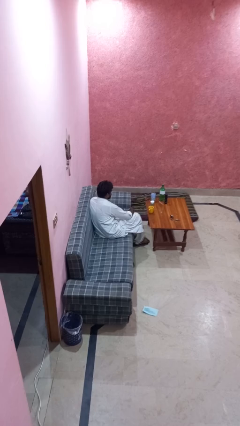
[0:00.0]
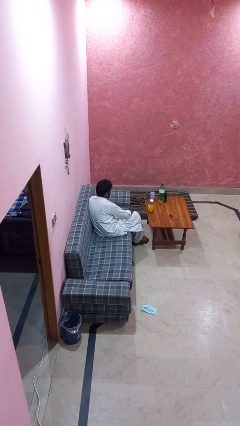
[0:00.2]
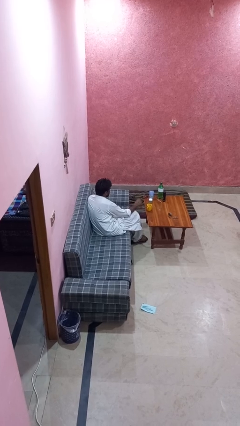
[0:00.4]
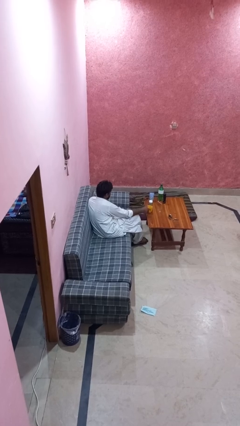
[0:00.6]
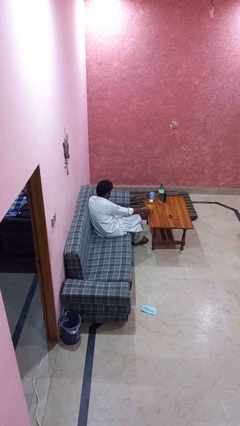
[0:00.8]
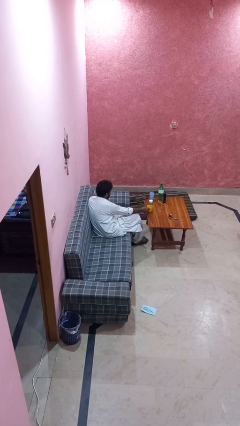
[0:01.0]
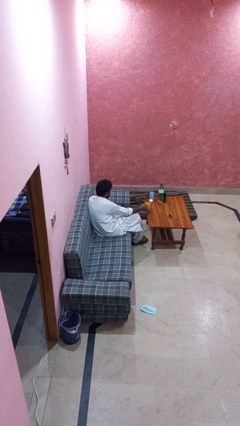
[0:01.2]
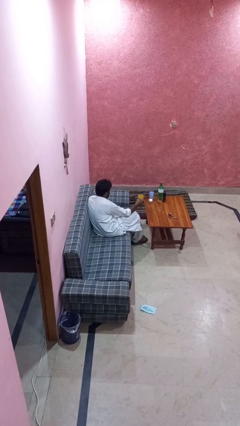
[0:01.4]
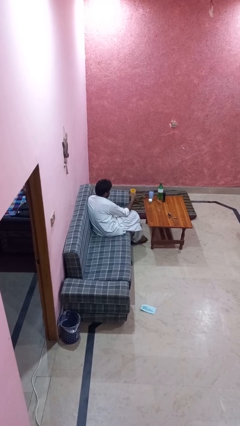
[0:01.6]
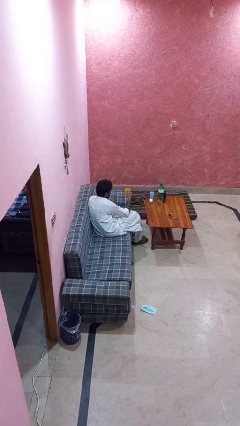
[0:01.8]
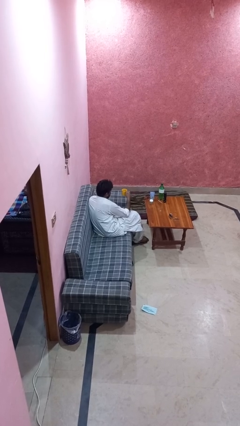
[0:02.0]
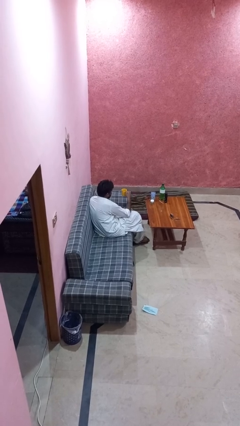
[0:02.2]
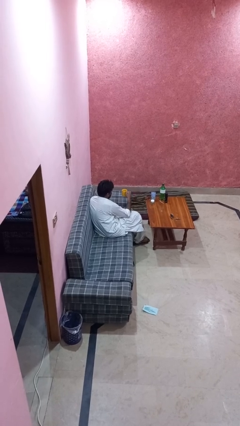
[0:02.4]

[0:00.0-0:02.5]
person picks up object from table

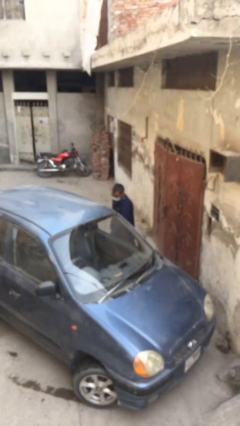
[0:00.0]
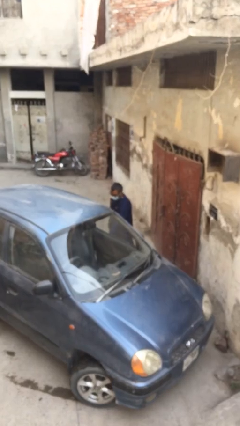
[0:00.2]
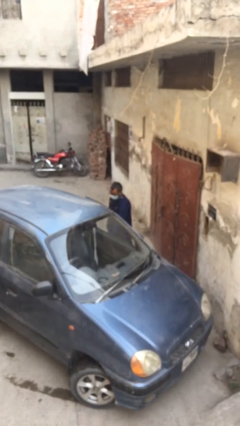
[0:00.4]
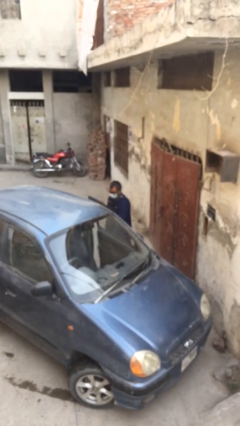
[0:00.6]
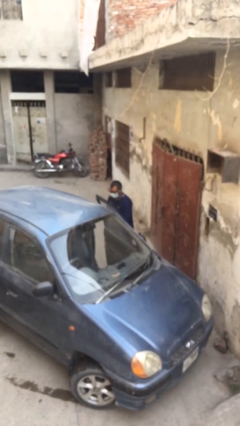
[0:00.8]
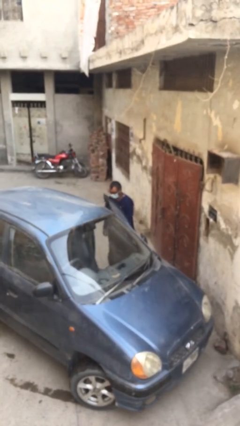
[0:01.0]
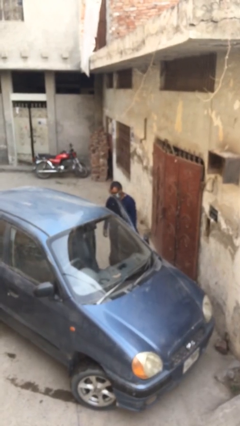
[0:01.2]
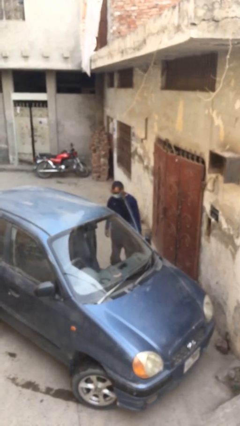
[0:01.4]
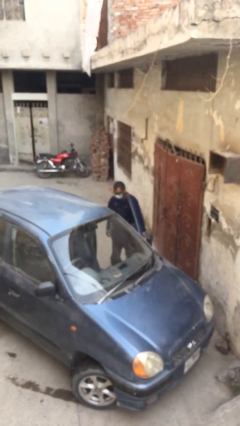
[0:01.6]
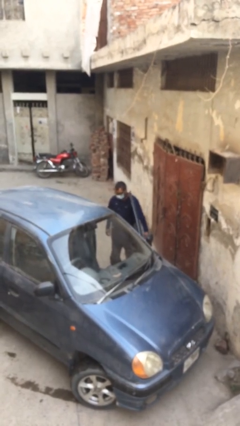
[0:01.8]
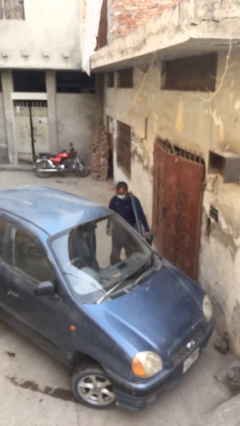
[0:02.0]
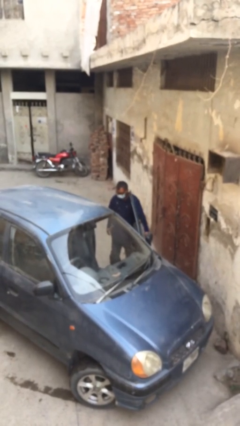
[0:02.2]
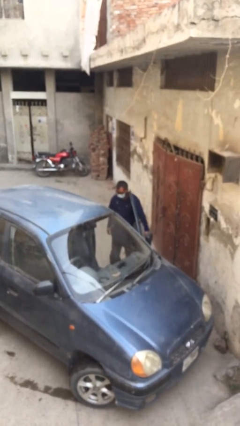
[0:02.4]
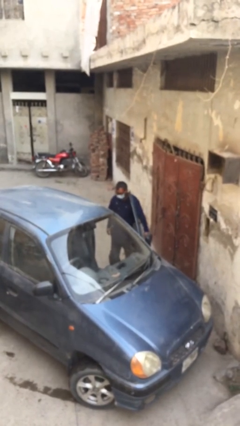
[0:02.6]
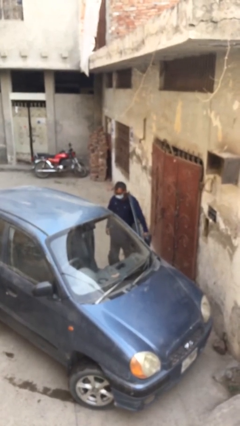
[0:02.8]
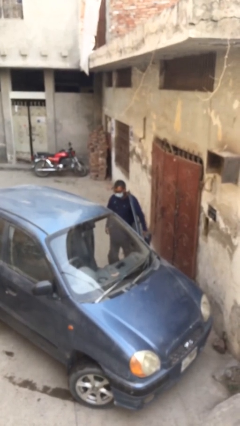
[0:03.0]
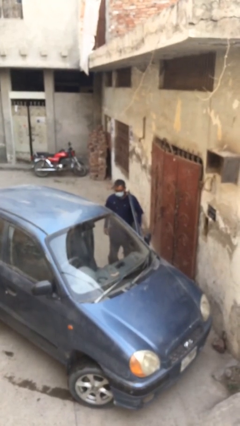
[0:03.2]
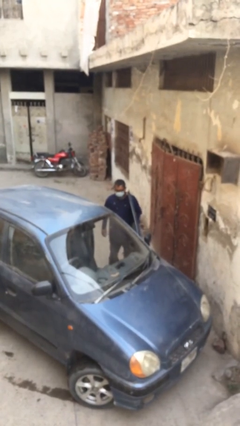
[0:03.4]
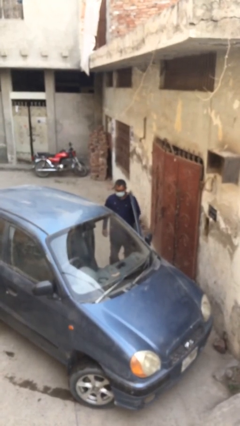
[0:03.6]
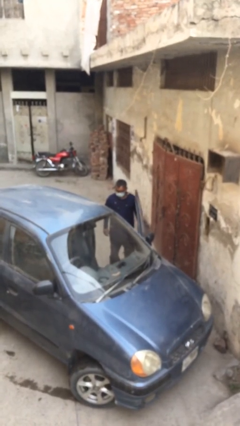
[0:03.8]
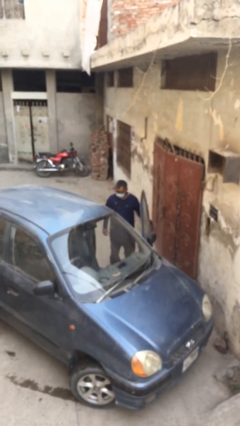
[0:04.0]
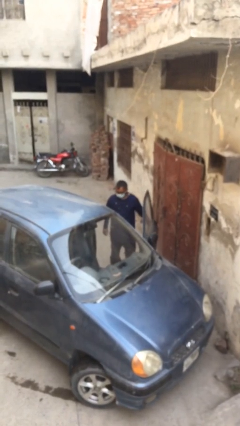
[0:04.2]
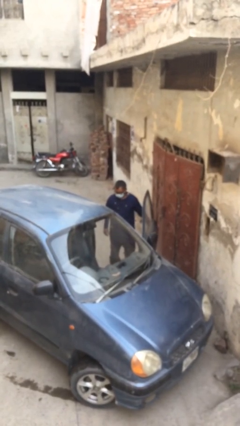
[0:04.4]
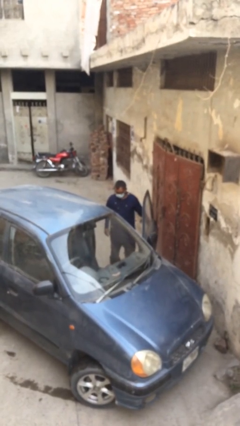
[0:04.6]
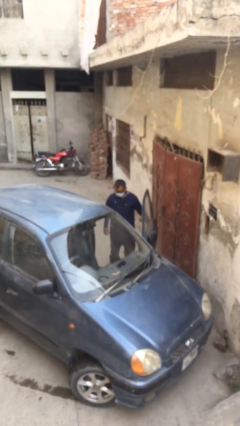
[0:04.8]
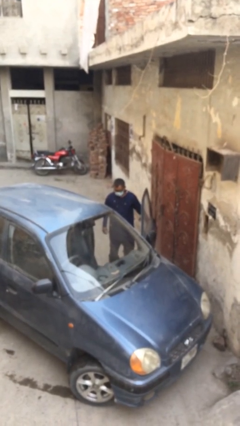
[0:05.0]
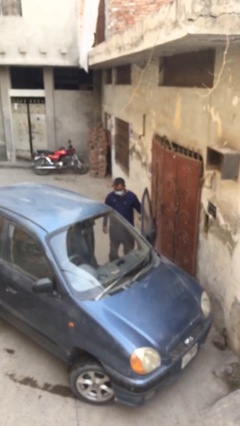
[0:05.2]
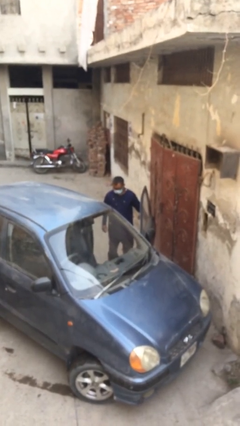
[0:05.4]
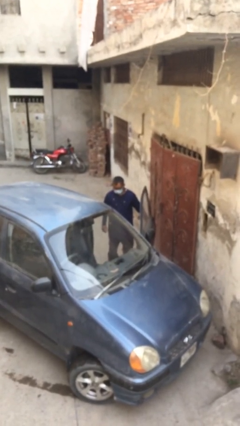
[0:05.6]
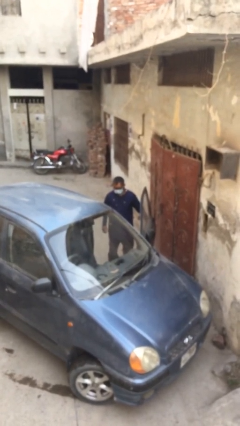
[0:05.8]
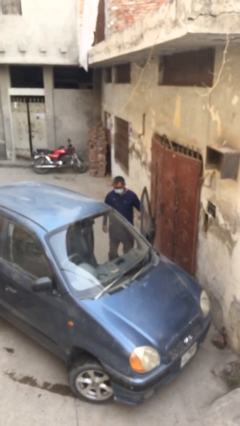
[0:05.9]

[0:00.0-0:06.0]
person opens car door

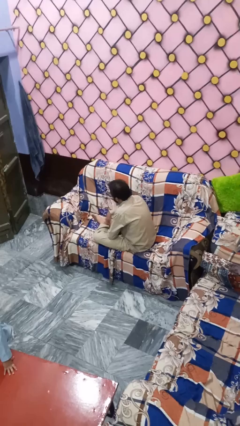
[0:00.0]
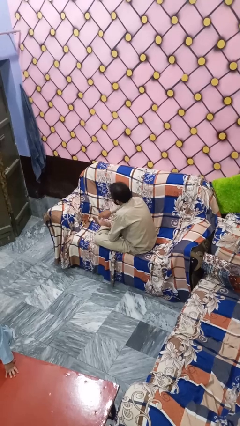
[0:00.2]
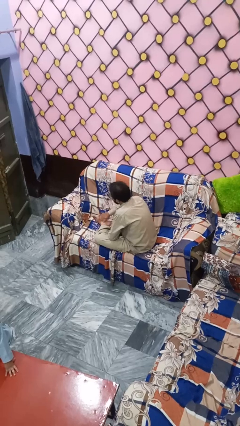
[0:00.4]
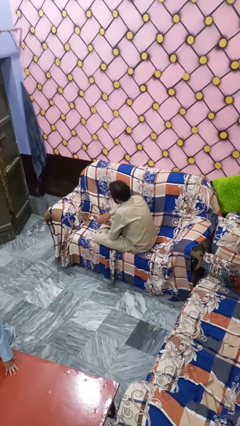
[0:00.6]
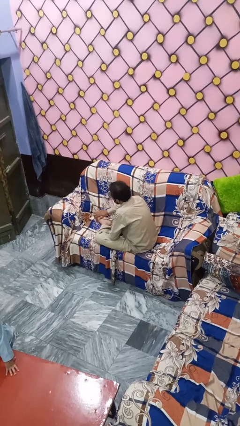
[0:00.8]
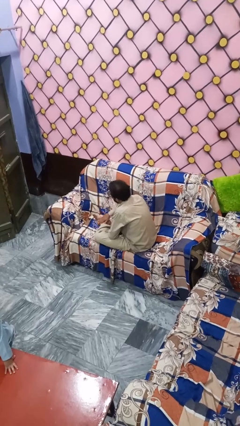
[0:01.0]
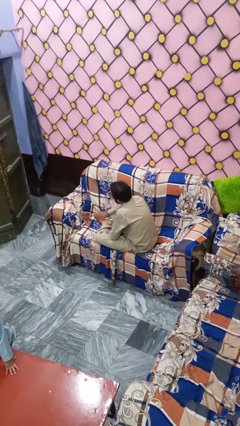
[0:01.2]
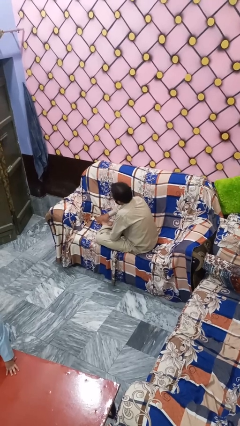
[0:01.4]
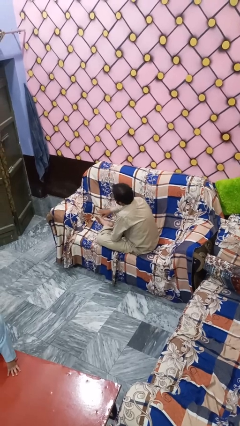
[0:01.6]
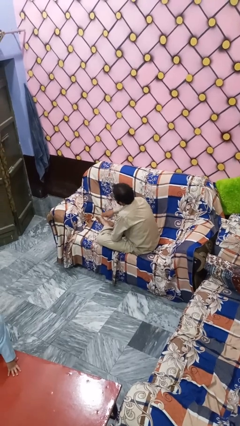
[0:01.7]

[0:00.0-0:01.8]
person rubs foot

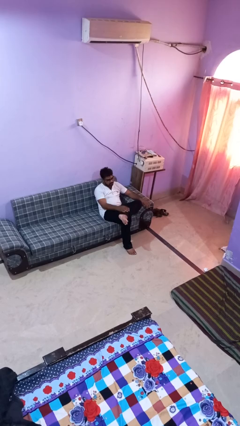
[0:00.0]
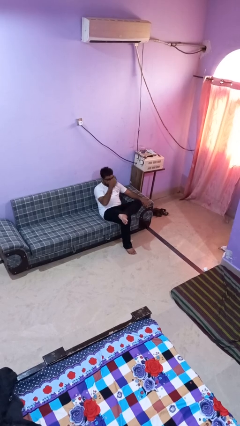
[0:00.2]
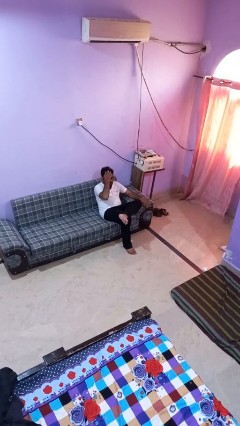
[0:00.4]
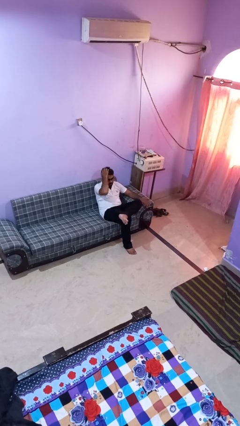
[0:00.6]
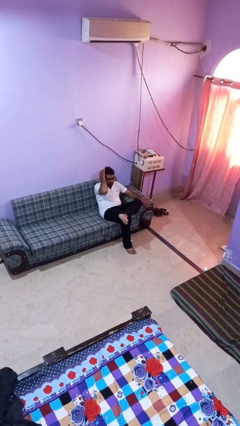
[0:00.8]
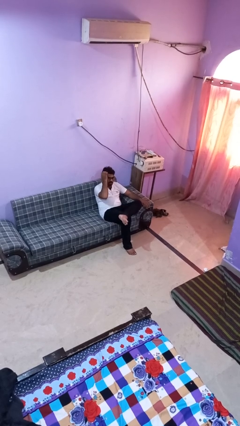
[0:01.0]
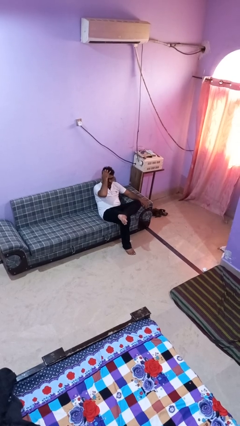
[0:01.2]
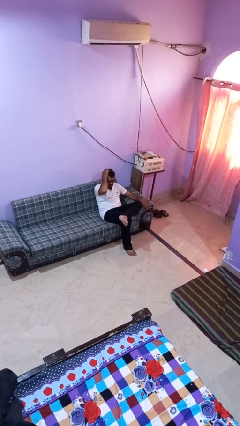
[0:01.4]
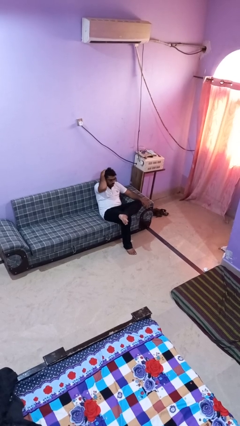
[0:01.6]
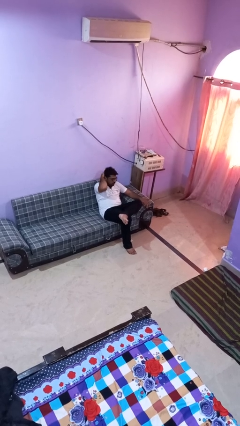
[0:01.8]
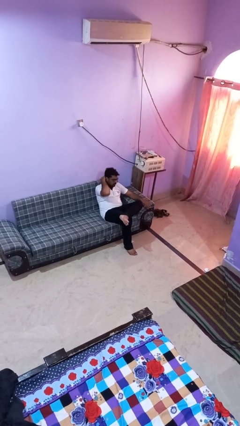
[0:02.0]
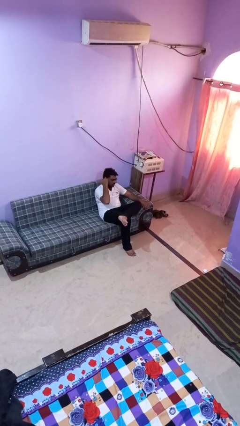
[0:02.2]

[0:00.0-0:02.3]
person strokes hair

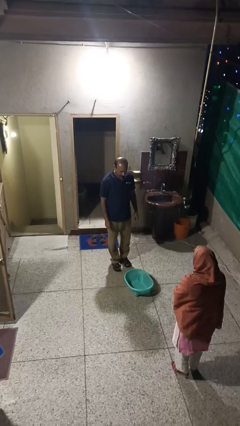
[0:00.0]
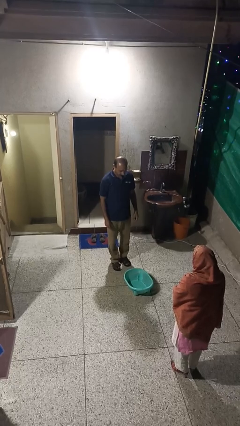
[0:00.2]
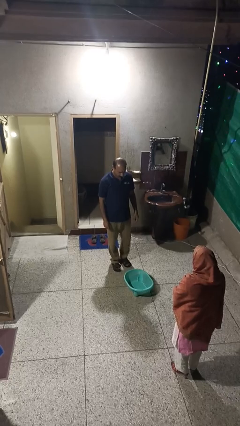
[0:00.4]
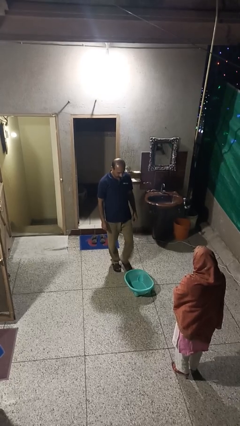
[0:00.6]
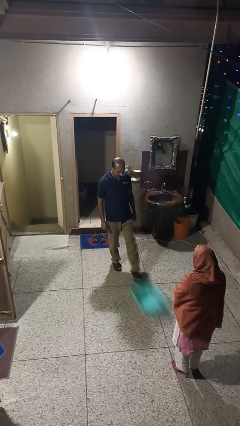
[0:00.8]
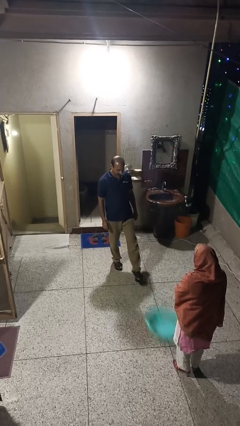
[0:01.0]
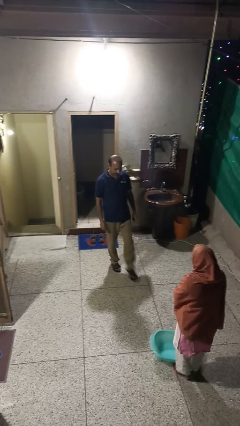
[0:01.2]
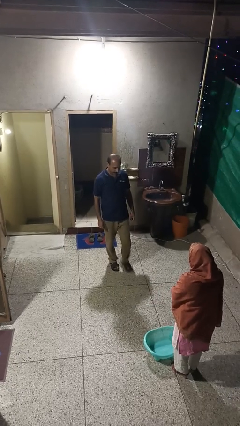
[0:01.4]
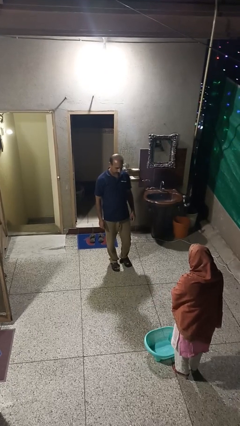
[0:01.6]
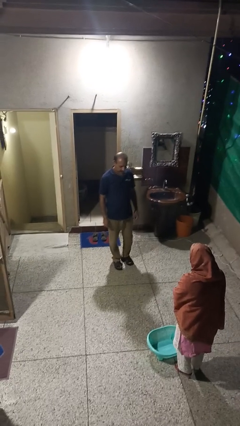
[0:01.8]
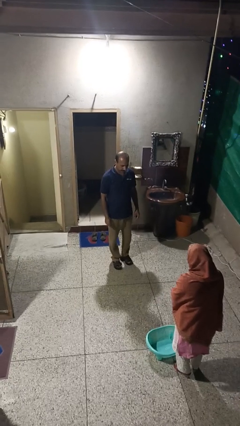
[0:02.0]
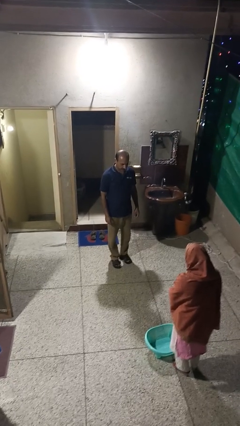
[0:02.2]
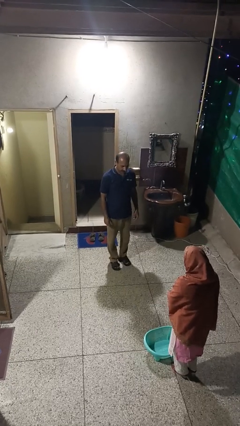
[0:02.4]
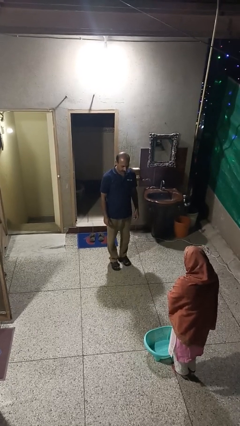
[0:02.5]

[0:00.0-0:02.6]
person kicks object to person

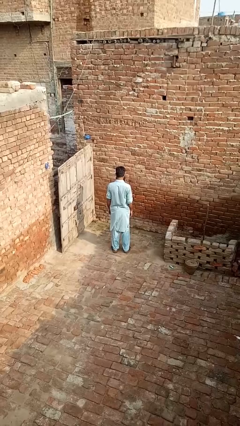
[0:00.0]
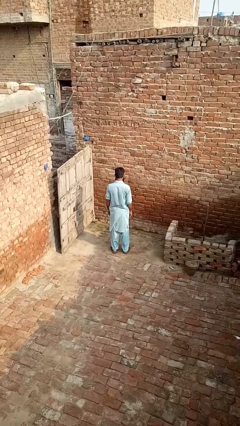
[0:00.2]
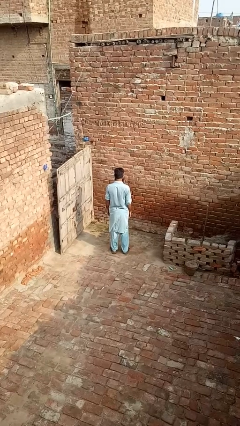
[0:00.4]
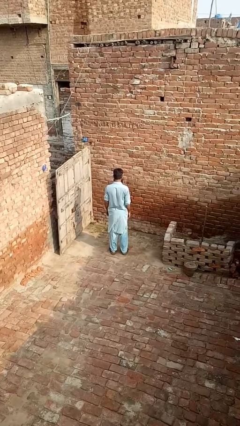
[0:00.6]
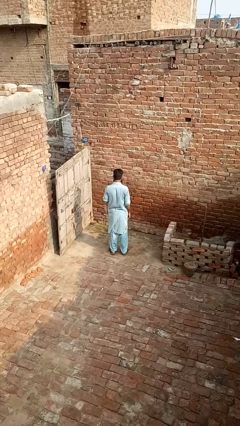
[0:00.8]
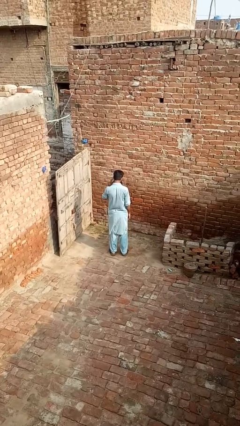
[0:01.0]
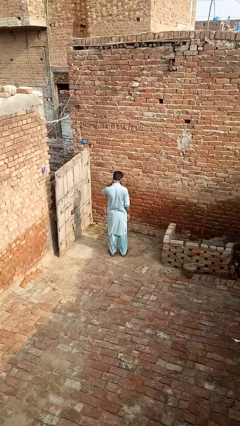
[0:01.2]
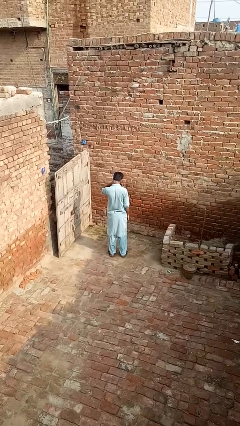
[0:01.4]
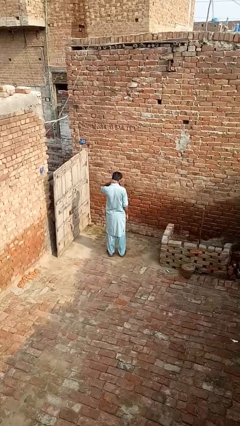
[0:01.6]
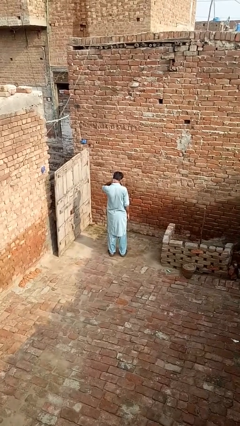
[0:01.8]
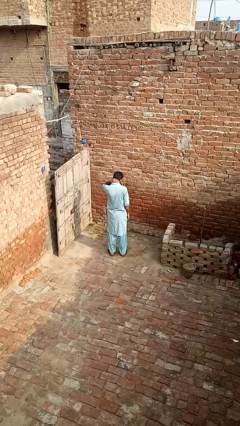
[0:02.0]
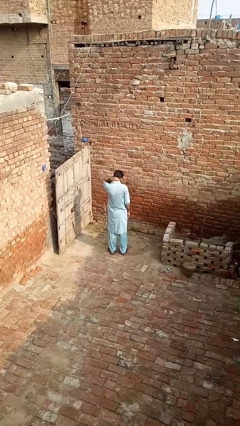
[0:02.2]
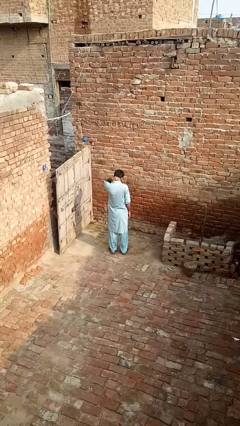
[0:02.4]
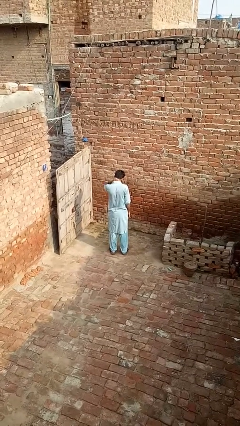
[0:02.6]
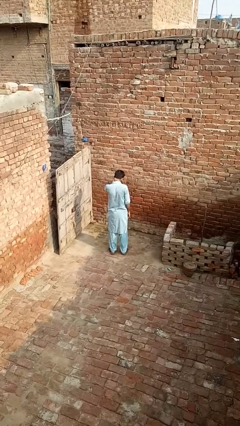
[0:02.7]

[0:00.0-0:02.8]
person rubs neck
